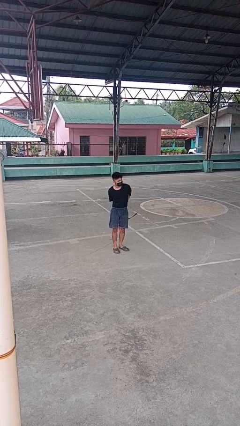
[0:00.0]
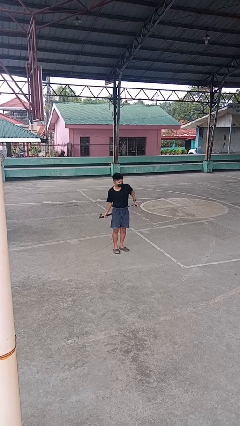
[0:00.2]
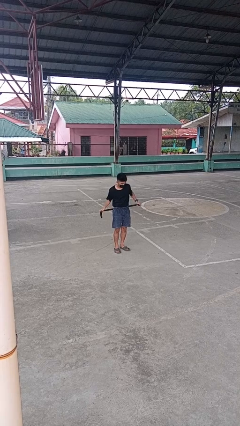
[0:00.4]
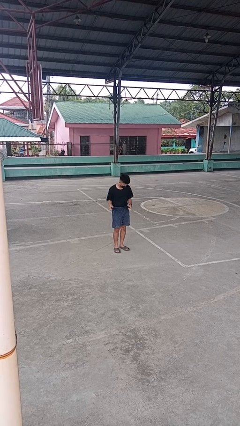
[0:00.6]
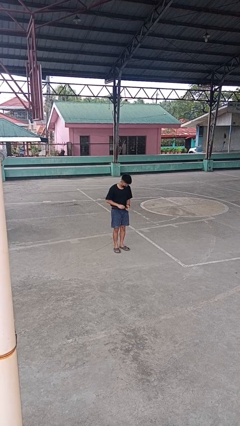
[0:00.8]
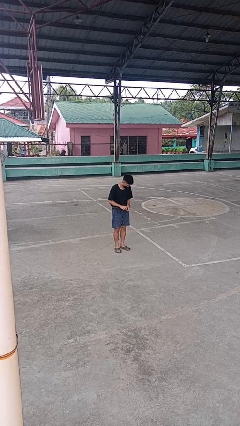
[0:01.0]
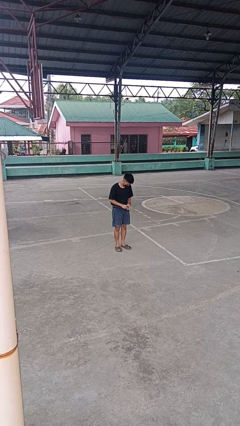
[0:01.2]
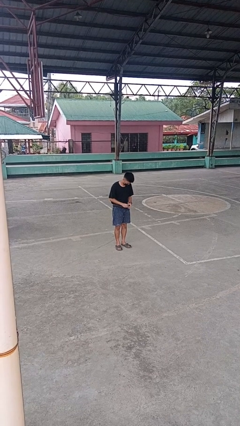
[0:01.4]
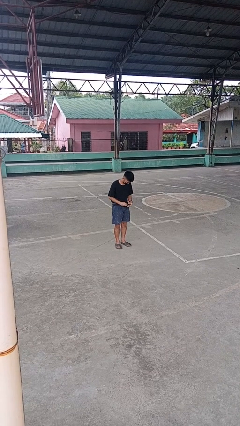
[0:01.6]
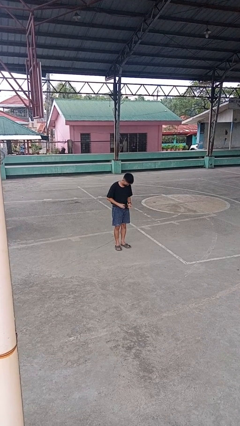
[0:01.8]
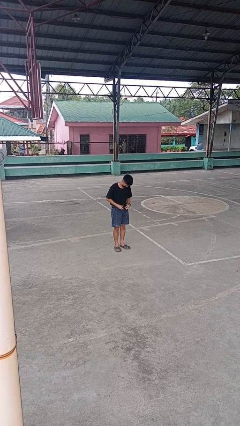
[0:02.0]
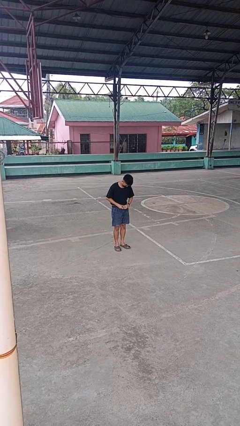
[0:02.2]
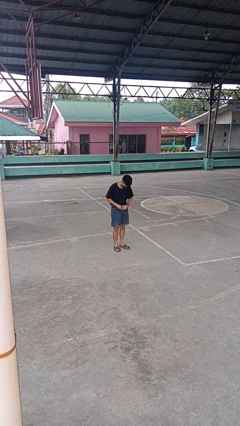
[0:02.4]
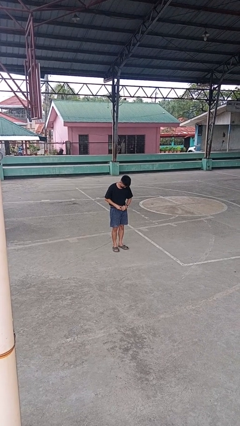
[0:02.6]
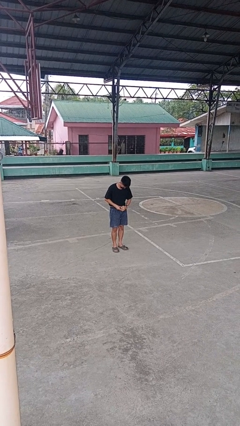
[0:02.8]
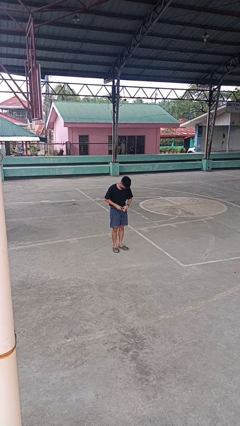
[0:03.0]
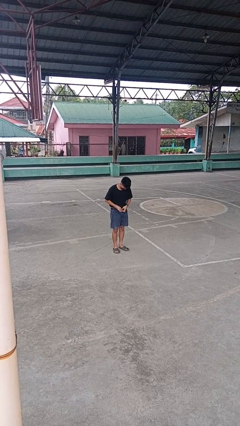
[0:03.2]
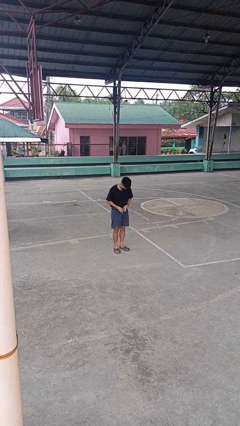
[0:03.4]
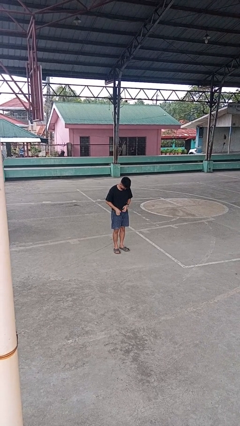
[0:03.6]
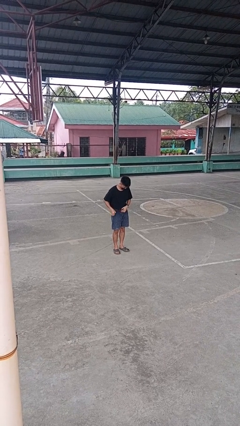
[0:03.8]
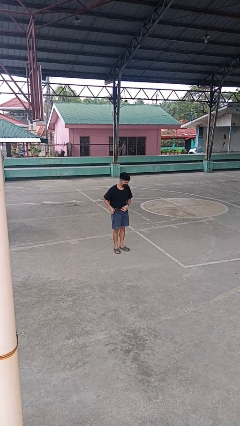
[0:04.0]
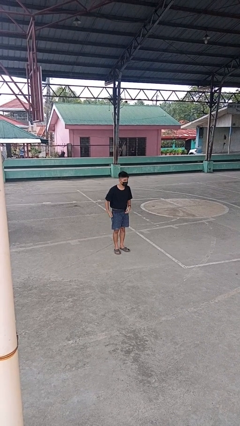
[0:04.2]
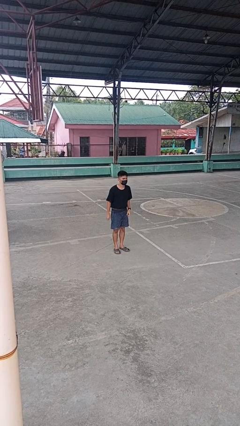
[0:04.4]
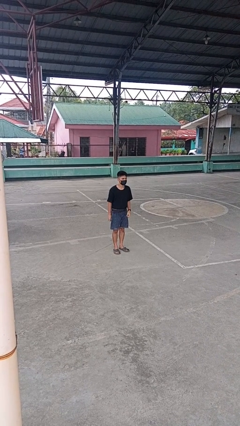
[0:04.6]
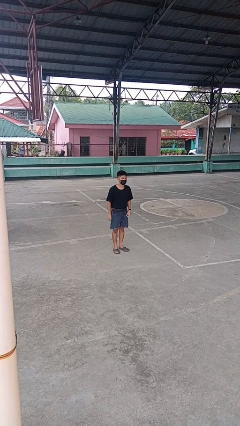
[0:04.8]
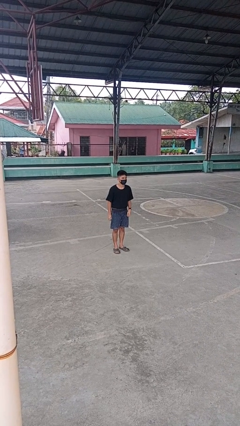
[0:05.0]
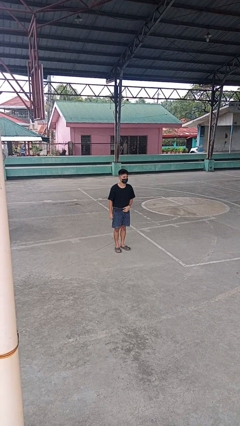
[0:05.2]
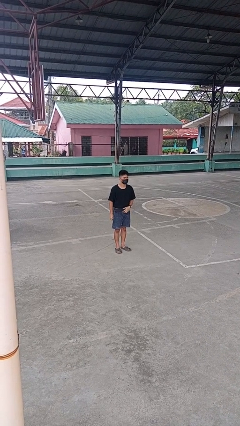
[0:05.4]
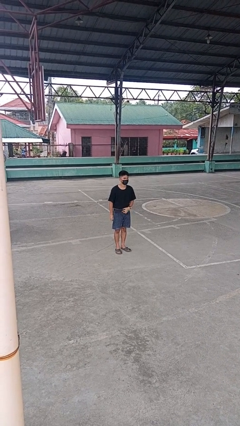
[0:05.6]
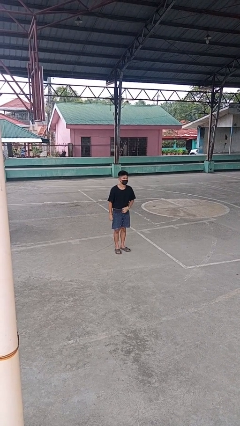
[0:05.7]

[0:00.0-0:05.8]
person puts on belt

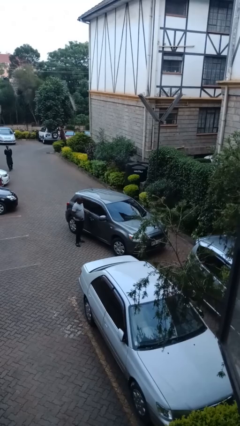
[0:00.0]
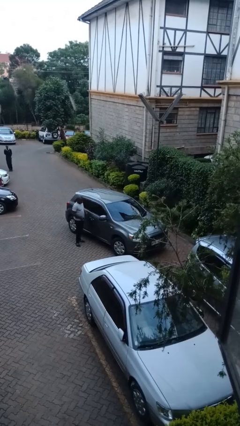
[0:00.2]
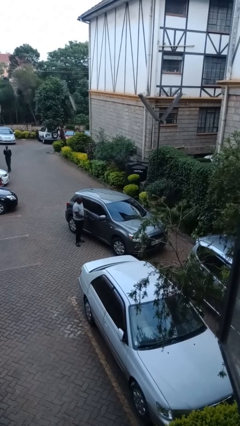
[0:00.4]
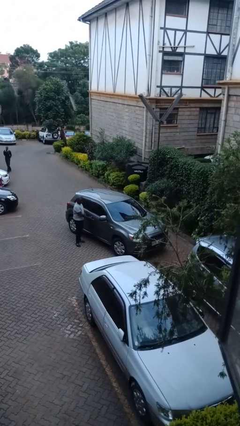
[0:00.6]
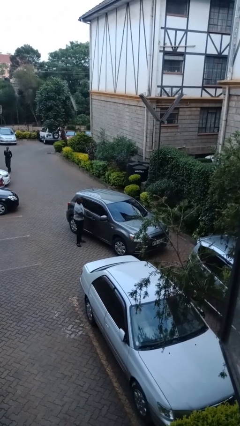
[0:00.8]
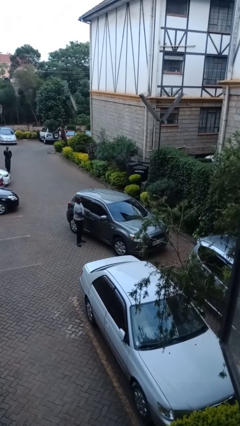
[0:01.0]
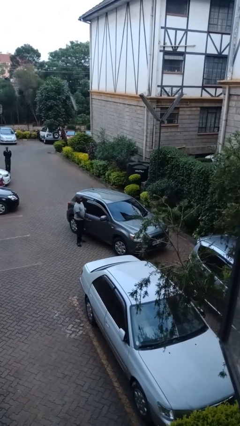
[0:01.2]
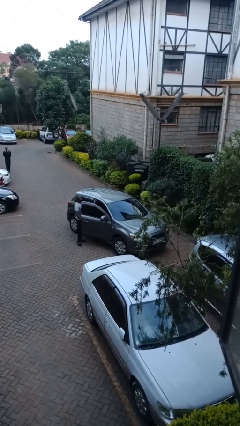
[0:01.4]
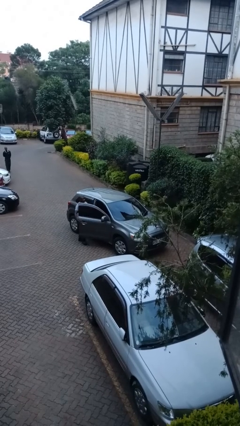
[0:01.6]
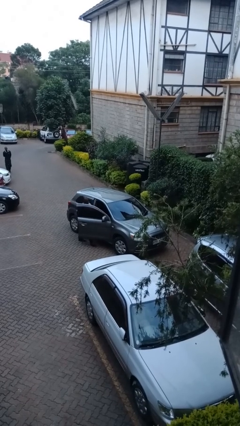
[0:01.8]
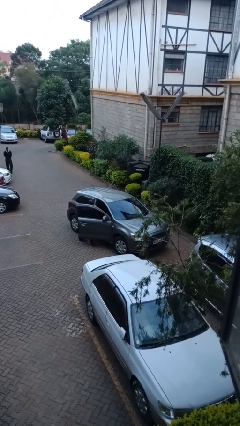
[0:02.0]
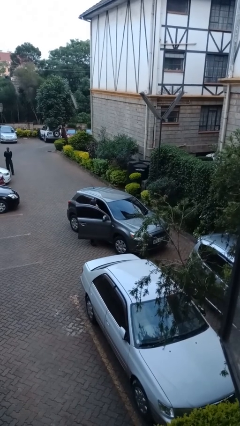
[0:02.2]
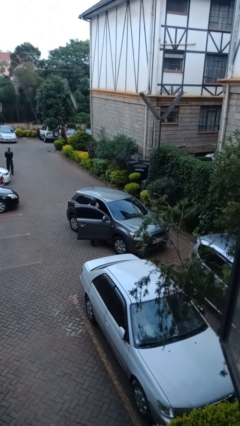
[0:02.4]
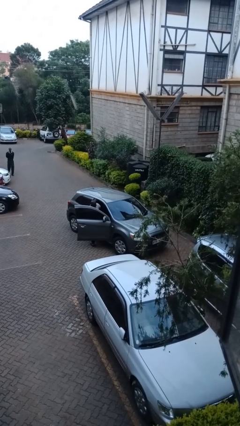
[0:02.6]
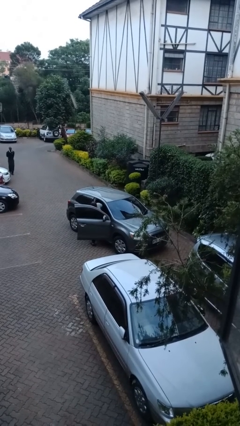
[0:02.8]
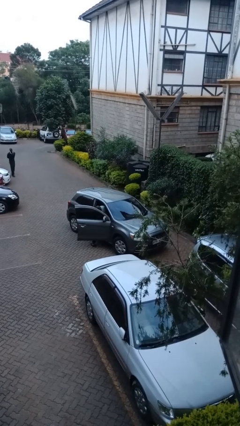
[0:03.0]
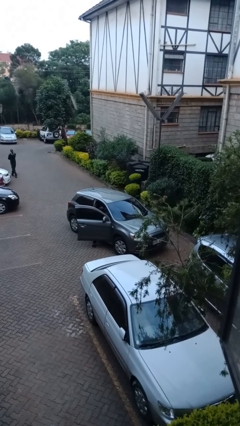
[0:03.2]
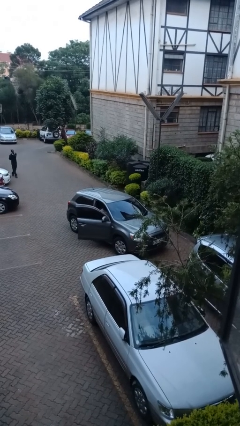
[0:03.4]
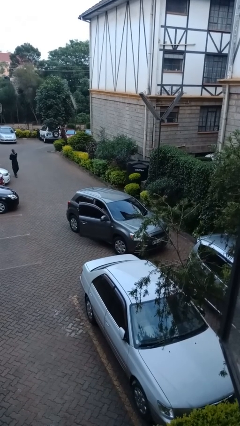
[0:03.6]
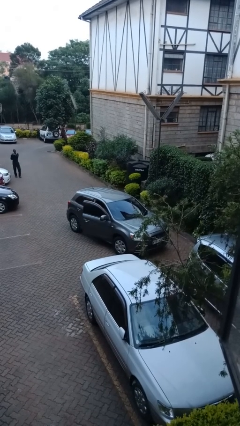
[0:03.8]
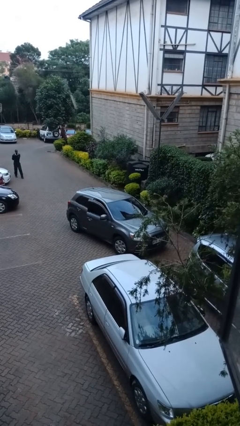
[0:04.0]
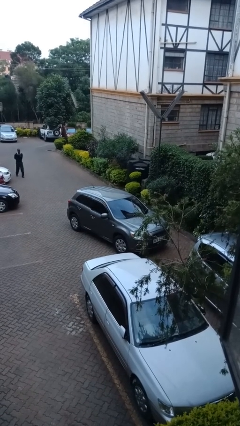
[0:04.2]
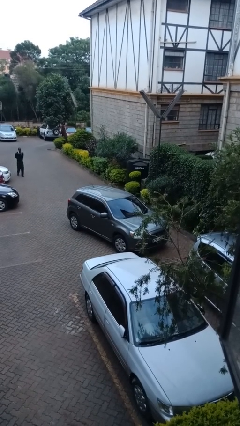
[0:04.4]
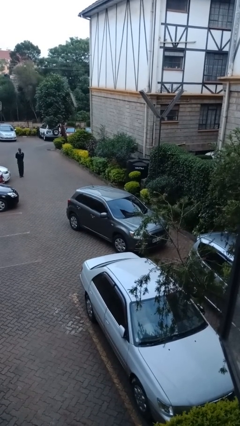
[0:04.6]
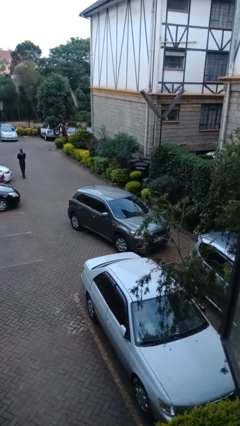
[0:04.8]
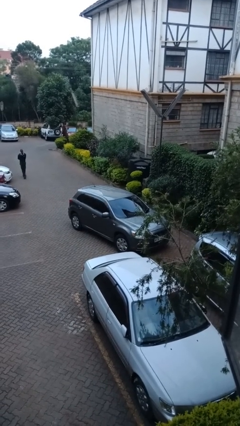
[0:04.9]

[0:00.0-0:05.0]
car picks up person

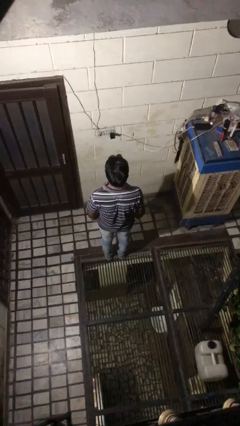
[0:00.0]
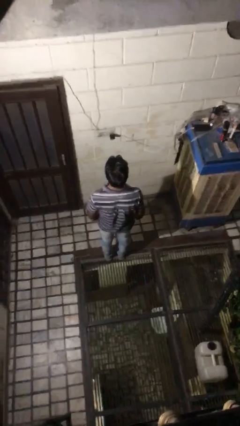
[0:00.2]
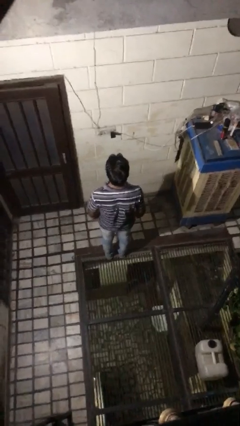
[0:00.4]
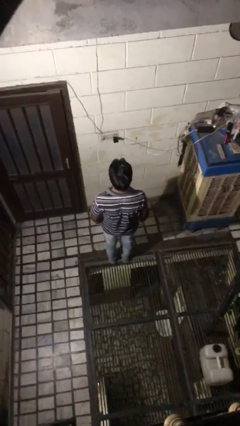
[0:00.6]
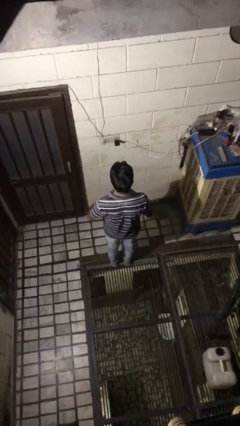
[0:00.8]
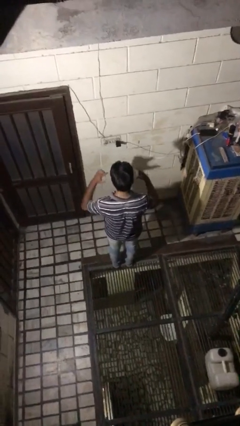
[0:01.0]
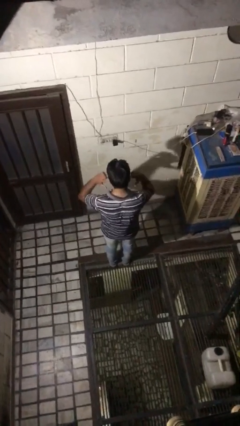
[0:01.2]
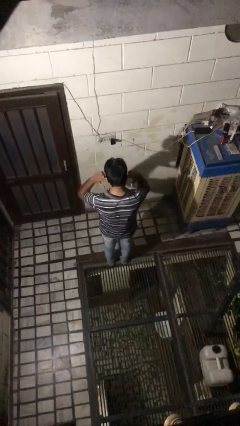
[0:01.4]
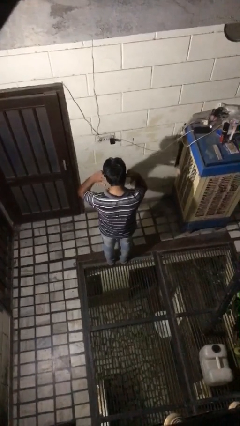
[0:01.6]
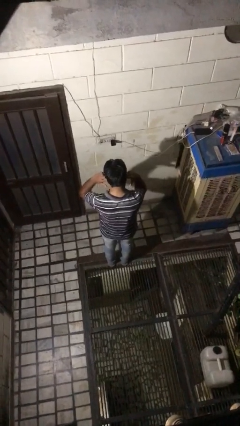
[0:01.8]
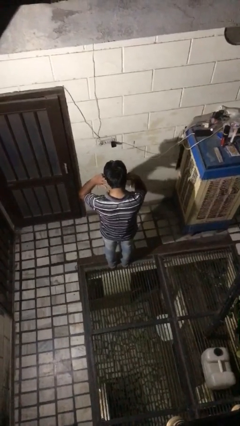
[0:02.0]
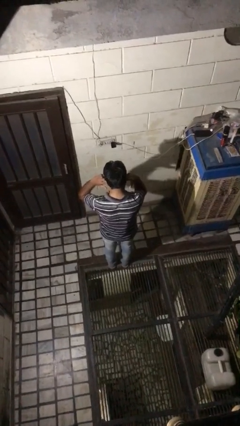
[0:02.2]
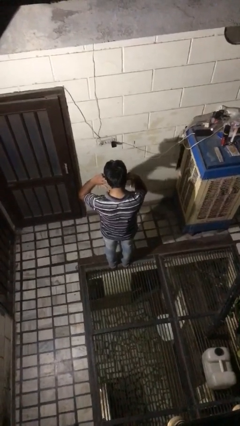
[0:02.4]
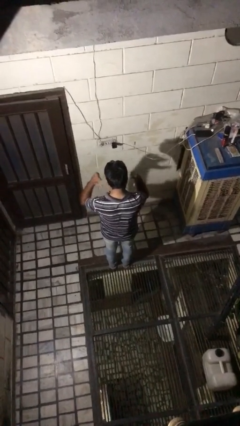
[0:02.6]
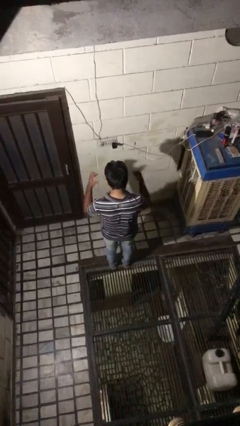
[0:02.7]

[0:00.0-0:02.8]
person puts fingers in ear

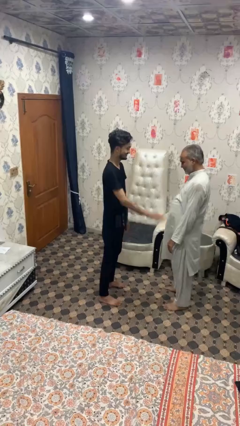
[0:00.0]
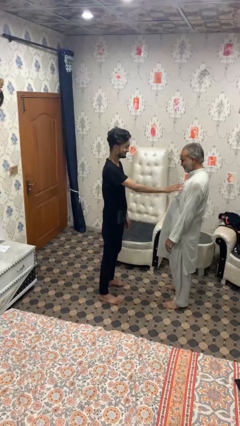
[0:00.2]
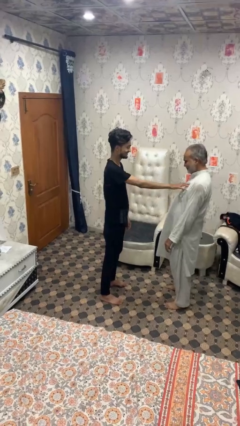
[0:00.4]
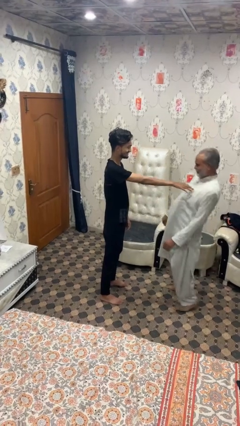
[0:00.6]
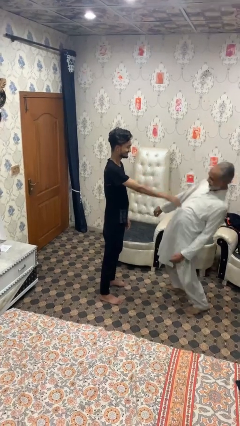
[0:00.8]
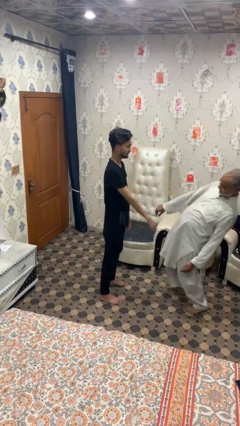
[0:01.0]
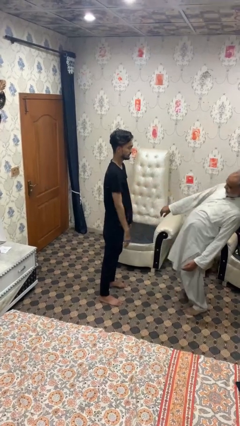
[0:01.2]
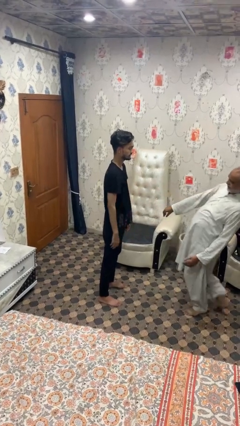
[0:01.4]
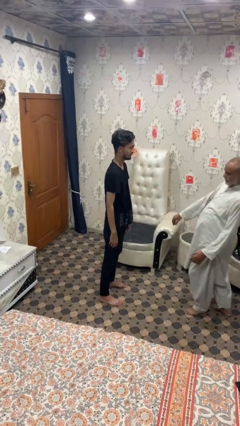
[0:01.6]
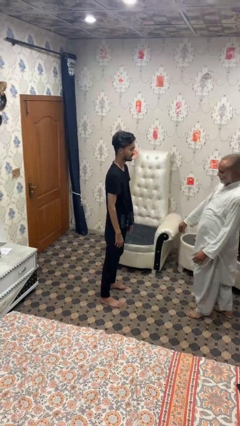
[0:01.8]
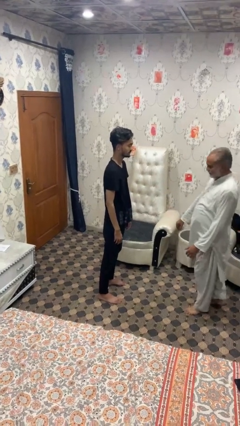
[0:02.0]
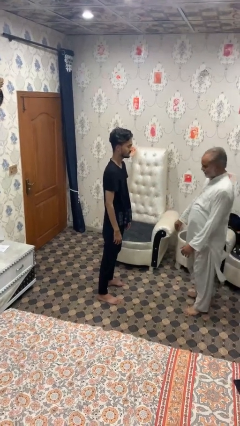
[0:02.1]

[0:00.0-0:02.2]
person shoves person

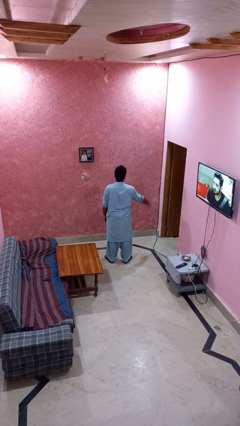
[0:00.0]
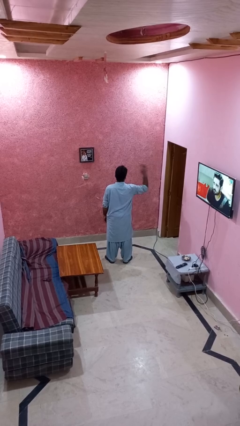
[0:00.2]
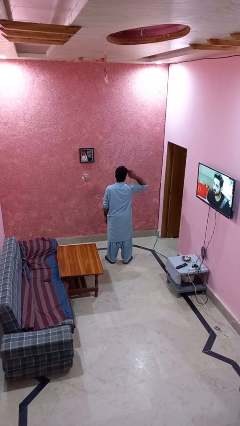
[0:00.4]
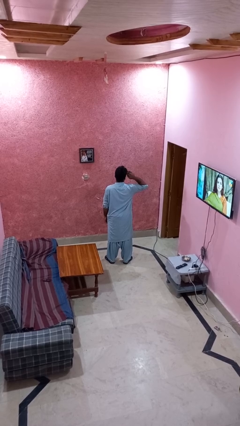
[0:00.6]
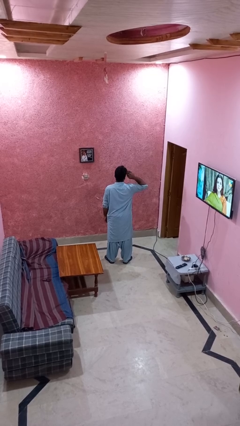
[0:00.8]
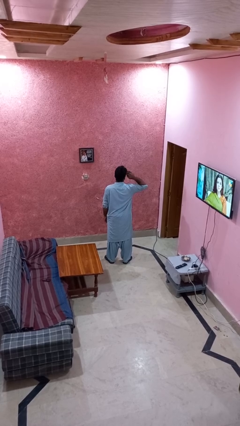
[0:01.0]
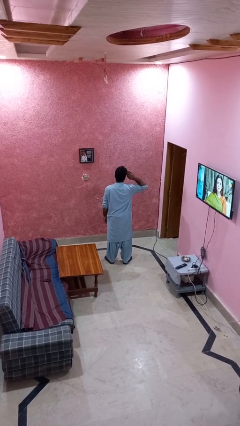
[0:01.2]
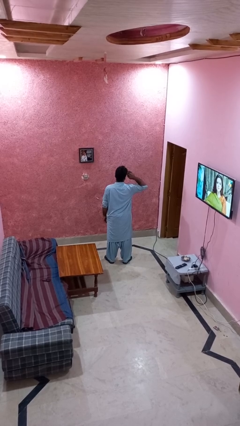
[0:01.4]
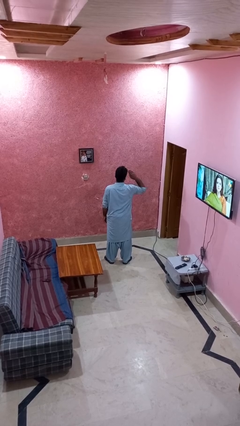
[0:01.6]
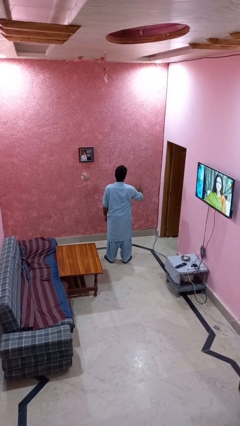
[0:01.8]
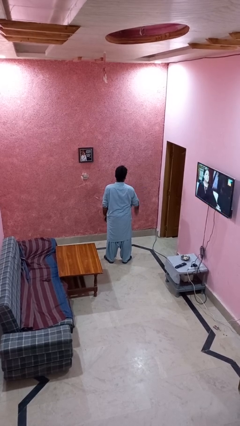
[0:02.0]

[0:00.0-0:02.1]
person salutes
